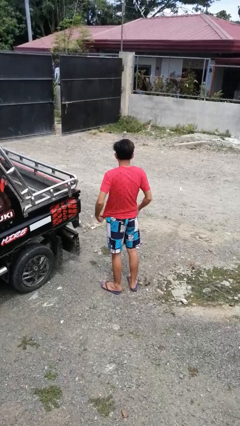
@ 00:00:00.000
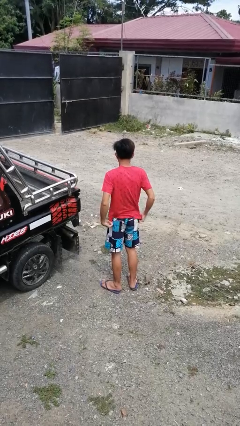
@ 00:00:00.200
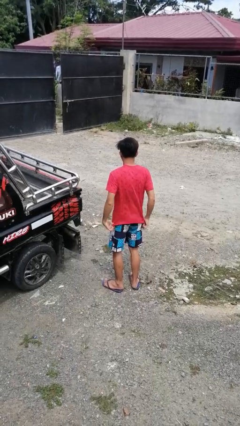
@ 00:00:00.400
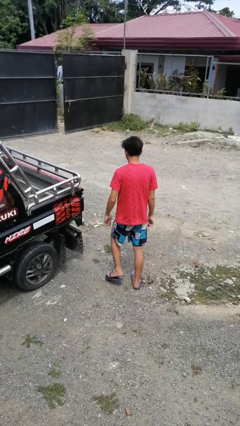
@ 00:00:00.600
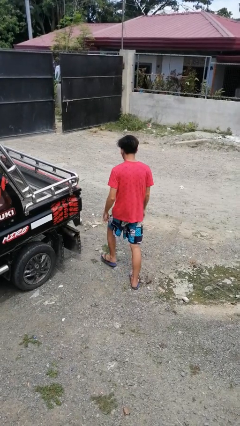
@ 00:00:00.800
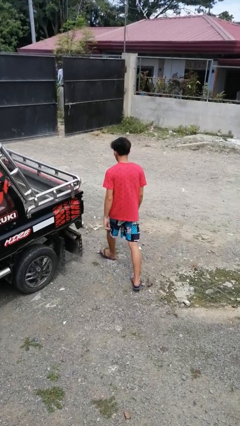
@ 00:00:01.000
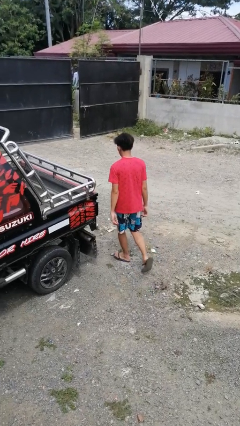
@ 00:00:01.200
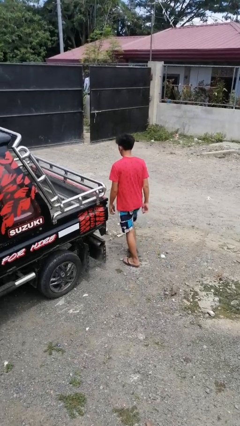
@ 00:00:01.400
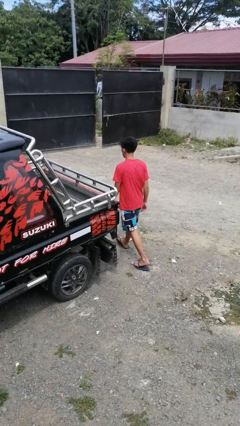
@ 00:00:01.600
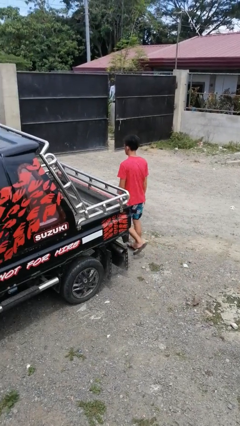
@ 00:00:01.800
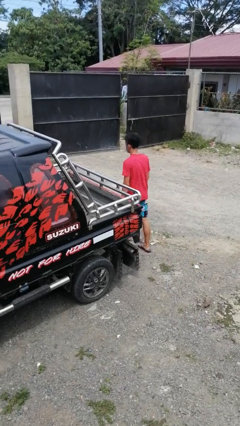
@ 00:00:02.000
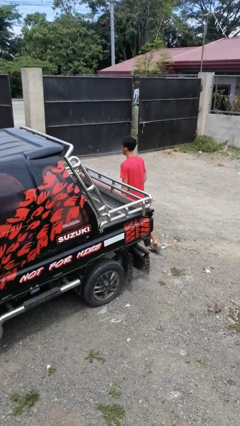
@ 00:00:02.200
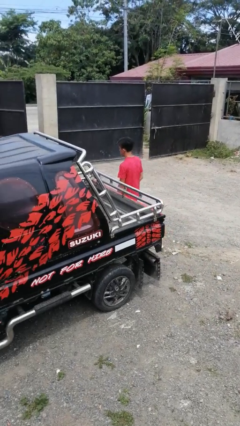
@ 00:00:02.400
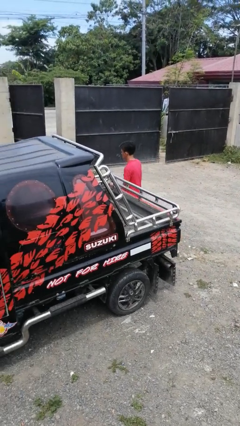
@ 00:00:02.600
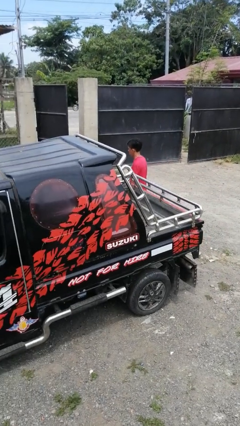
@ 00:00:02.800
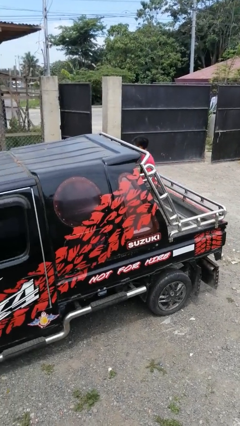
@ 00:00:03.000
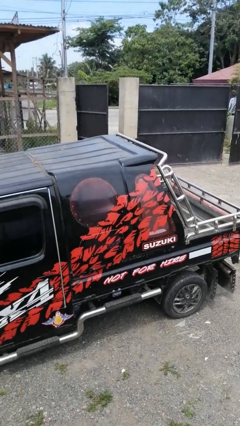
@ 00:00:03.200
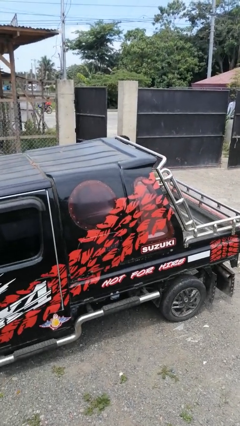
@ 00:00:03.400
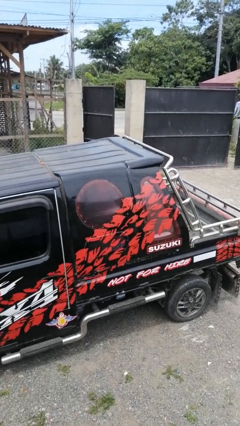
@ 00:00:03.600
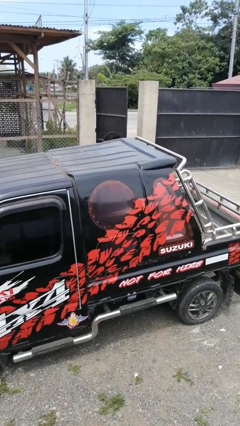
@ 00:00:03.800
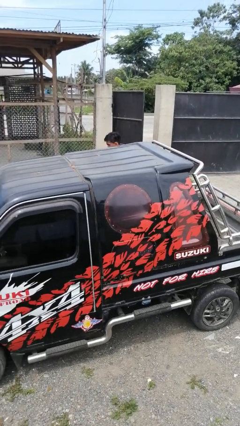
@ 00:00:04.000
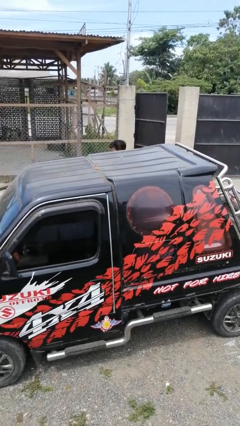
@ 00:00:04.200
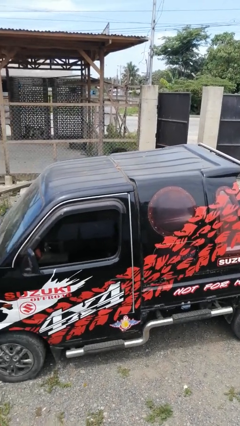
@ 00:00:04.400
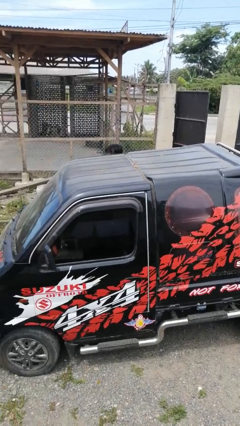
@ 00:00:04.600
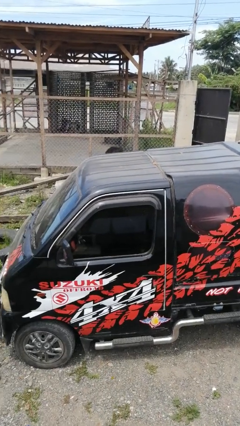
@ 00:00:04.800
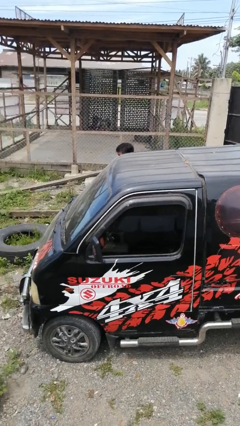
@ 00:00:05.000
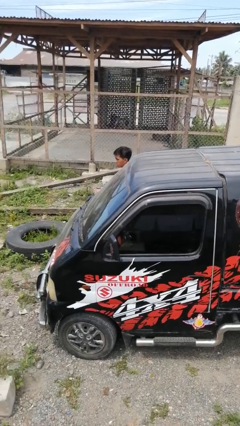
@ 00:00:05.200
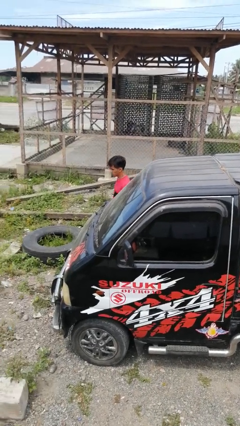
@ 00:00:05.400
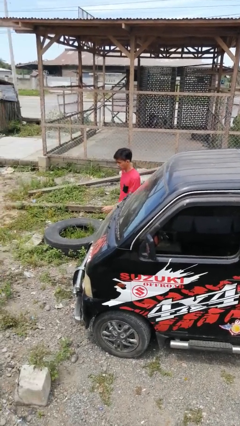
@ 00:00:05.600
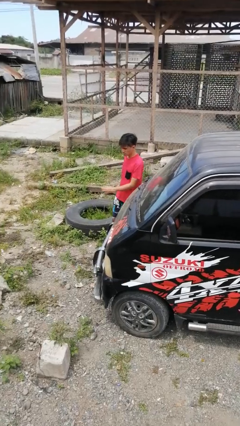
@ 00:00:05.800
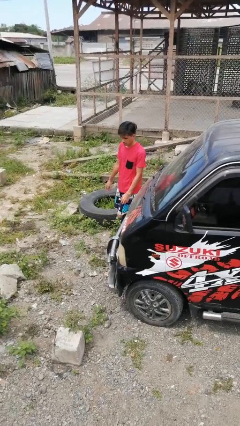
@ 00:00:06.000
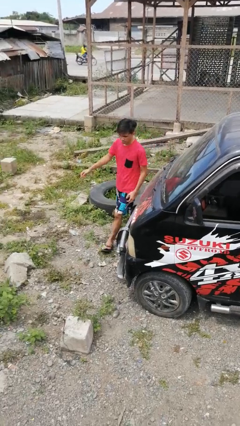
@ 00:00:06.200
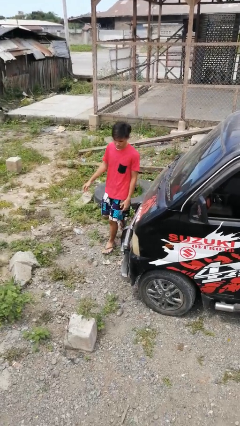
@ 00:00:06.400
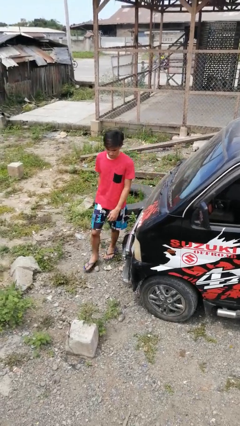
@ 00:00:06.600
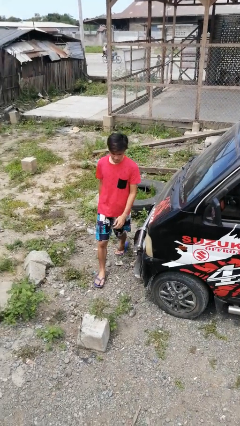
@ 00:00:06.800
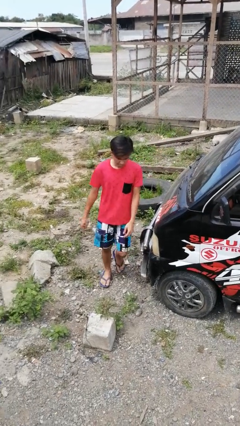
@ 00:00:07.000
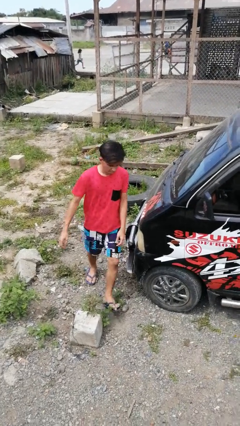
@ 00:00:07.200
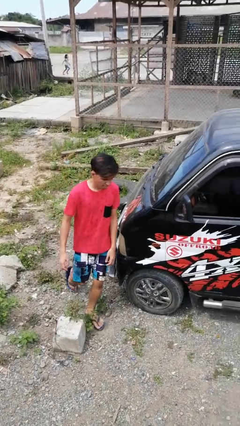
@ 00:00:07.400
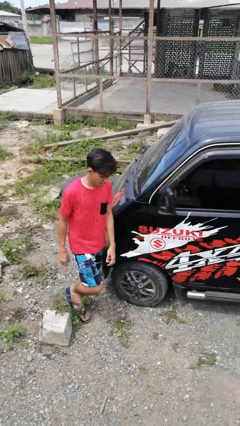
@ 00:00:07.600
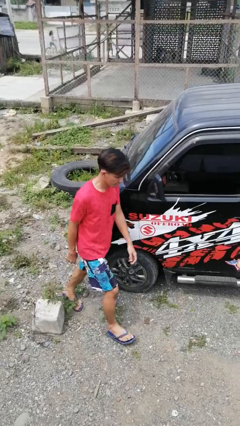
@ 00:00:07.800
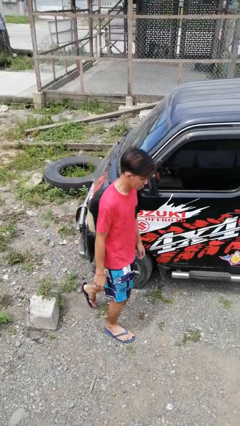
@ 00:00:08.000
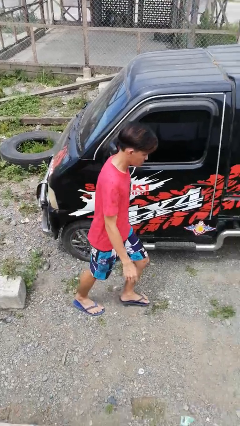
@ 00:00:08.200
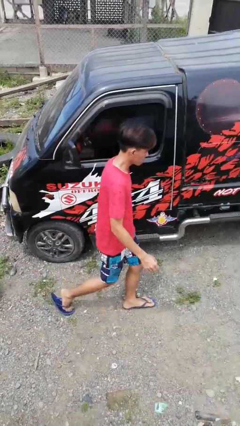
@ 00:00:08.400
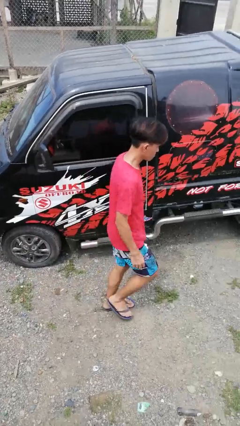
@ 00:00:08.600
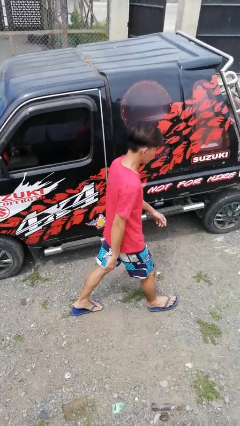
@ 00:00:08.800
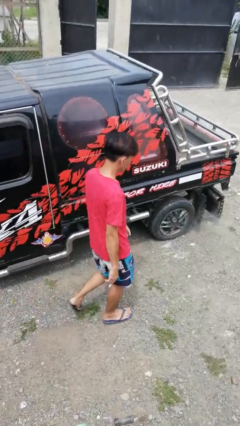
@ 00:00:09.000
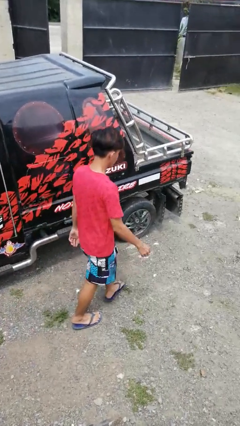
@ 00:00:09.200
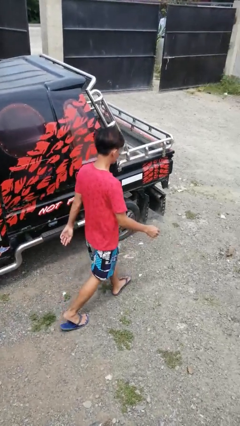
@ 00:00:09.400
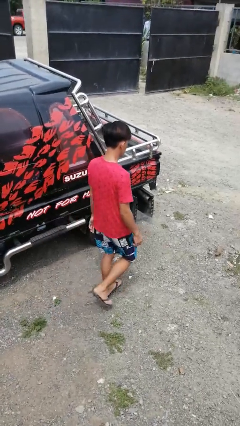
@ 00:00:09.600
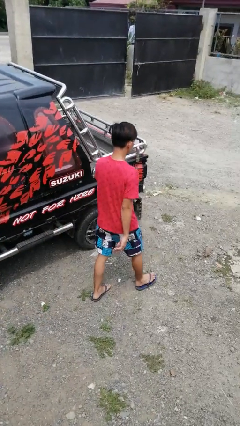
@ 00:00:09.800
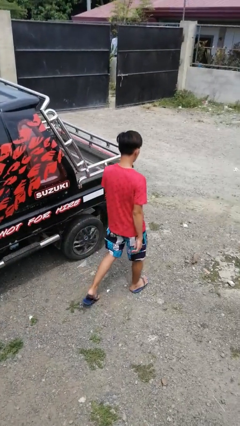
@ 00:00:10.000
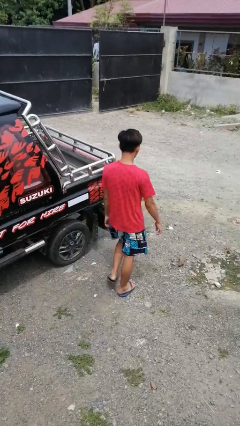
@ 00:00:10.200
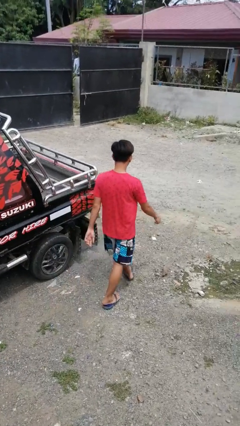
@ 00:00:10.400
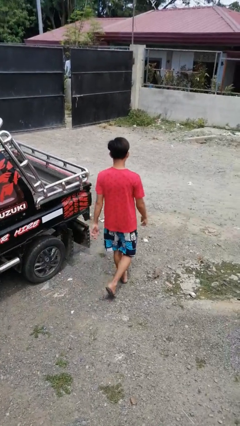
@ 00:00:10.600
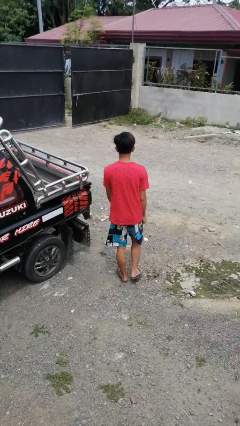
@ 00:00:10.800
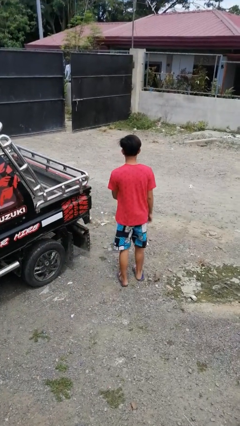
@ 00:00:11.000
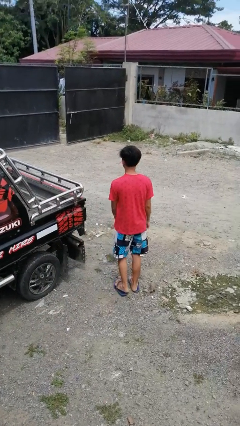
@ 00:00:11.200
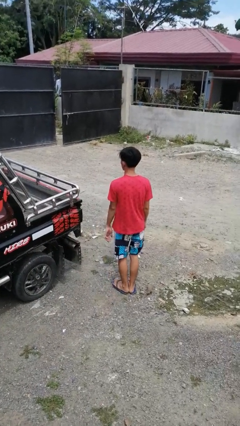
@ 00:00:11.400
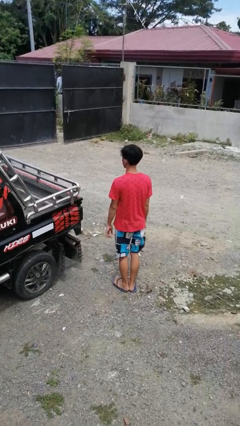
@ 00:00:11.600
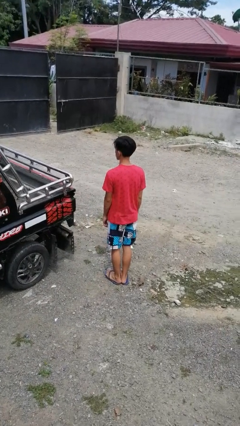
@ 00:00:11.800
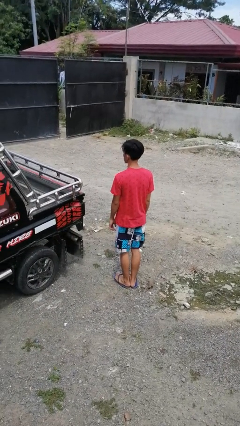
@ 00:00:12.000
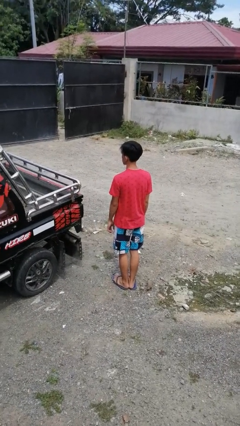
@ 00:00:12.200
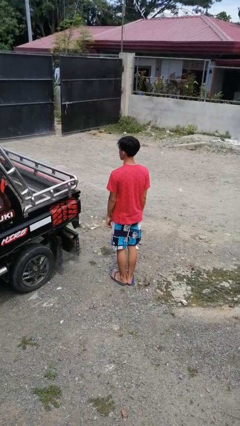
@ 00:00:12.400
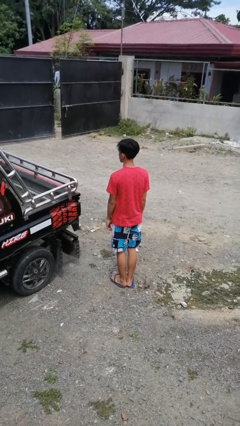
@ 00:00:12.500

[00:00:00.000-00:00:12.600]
person walks around car

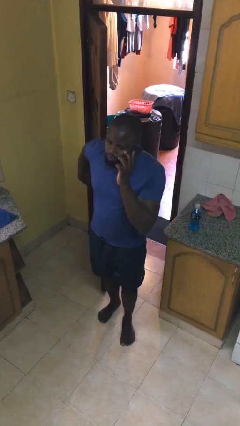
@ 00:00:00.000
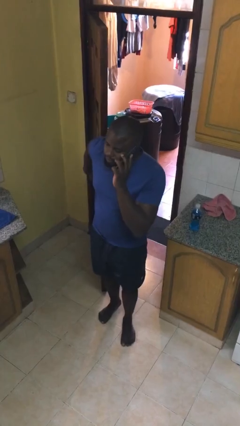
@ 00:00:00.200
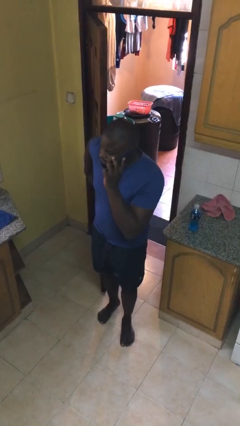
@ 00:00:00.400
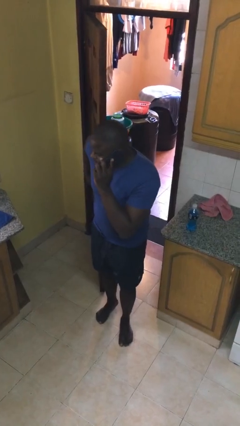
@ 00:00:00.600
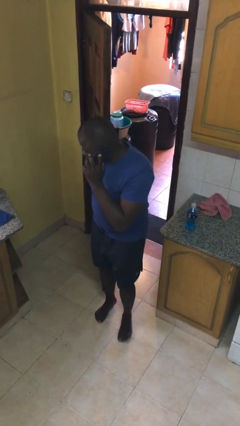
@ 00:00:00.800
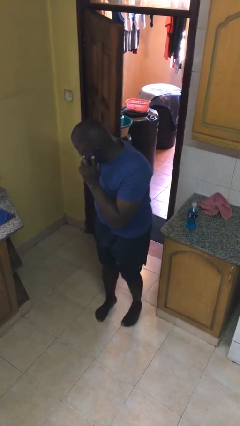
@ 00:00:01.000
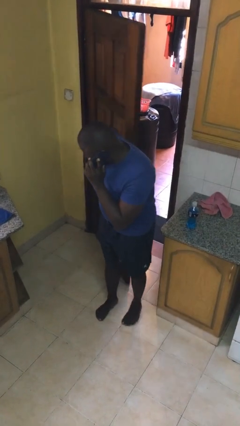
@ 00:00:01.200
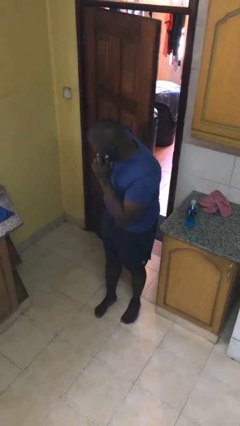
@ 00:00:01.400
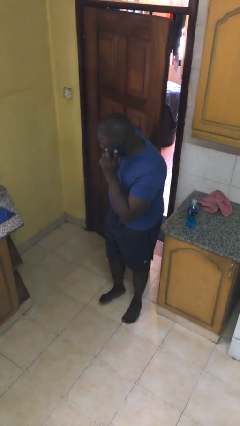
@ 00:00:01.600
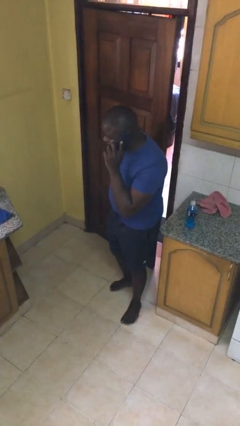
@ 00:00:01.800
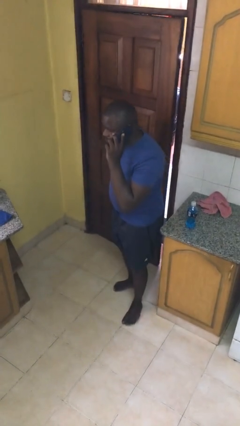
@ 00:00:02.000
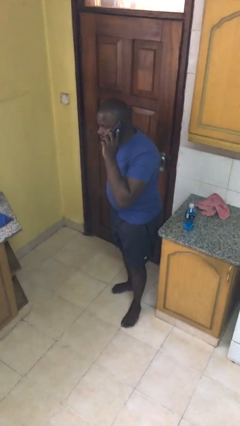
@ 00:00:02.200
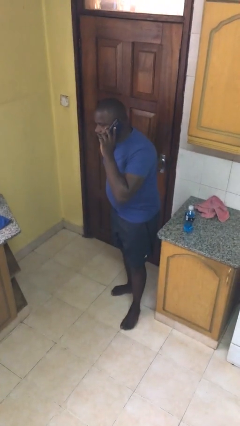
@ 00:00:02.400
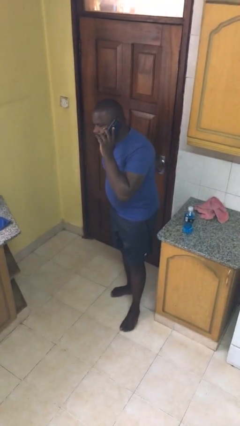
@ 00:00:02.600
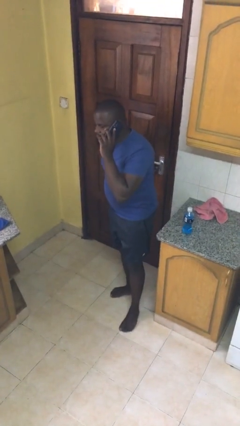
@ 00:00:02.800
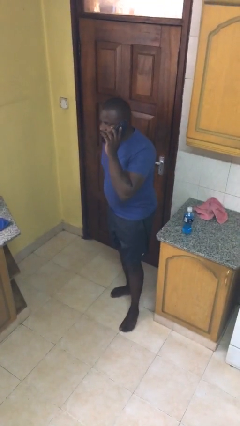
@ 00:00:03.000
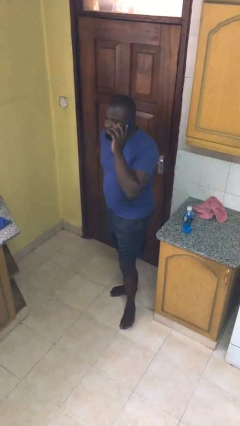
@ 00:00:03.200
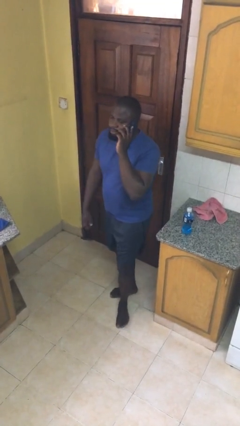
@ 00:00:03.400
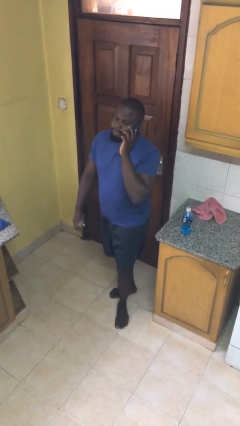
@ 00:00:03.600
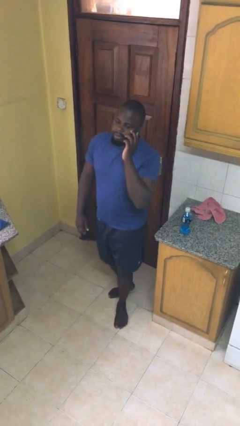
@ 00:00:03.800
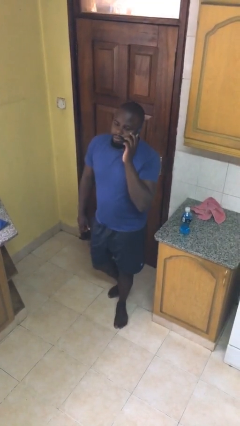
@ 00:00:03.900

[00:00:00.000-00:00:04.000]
person closes facility door

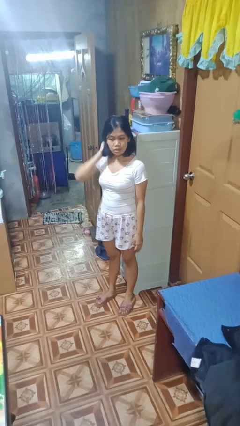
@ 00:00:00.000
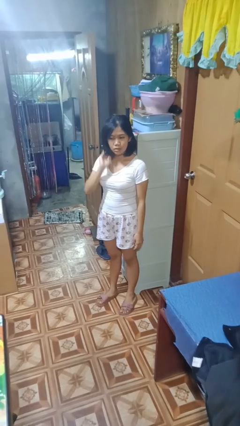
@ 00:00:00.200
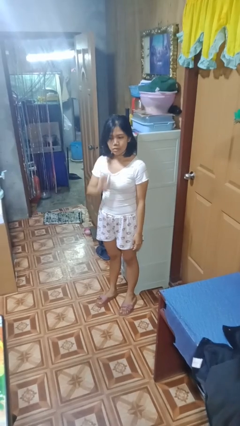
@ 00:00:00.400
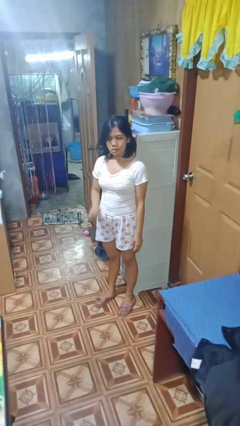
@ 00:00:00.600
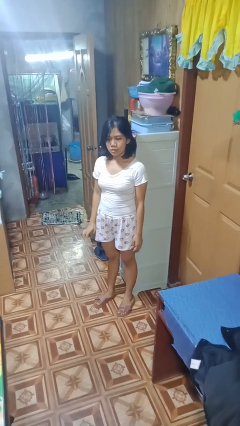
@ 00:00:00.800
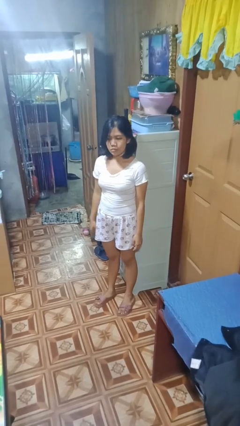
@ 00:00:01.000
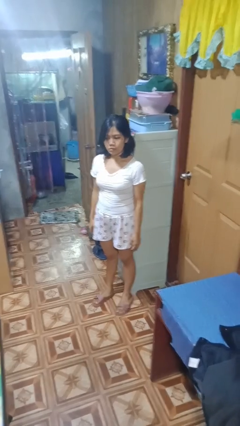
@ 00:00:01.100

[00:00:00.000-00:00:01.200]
person strokes hair
